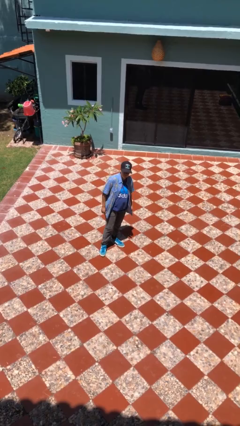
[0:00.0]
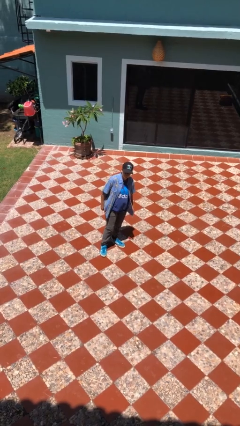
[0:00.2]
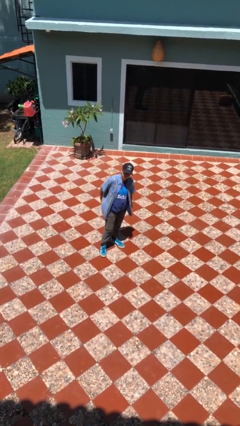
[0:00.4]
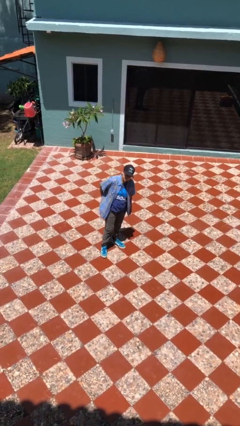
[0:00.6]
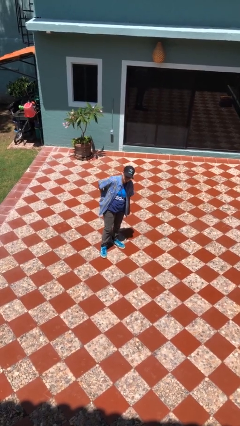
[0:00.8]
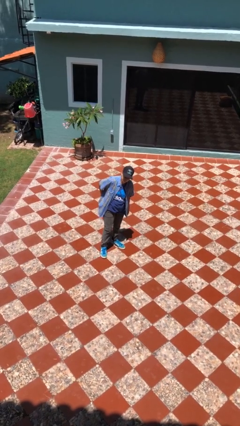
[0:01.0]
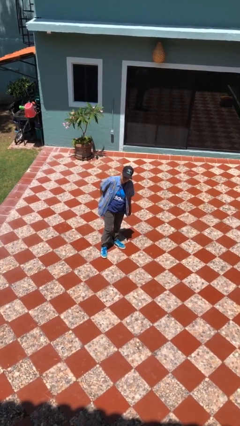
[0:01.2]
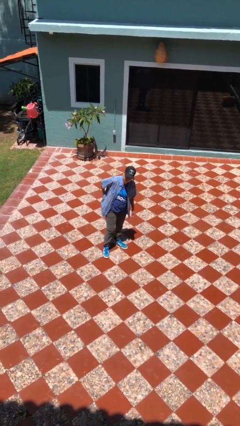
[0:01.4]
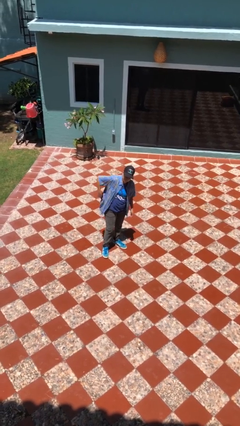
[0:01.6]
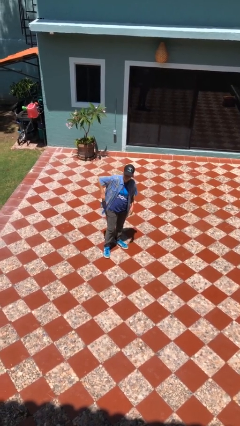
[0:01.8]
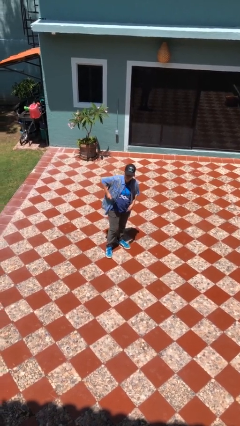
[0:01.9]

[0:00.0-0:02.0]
person takes phone from pocket

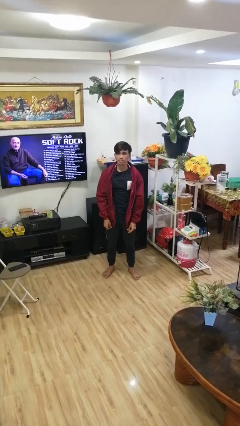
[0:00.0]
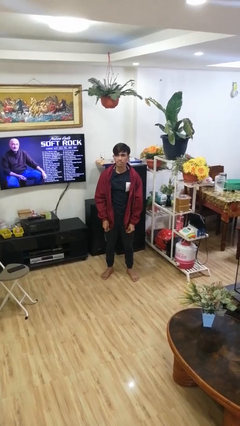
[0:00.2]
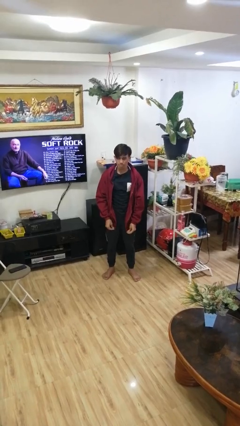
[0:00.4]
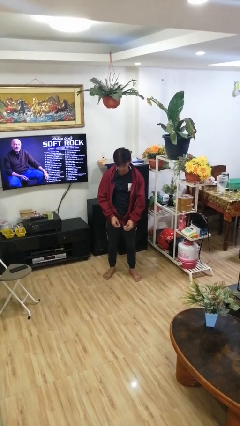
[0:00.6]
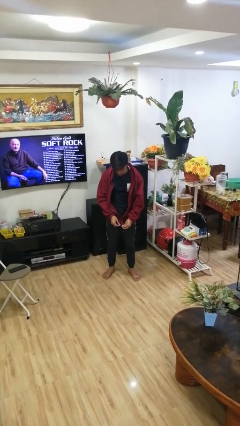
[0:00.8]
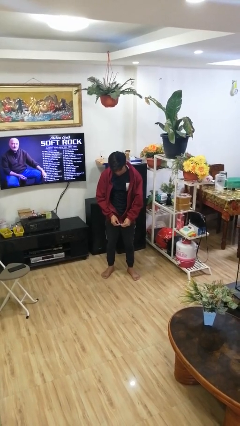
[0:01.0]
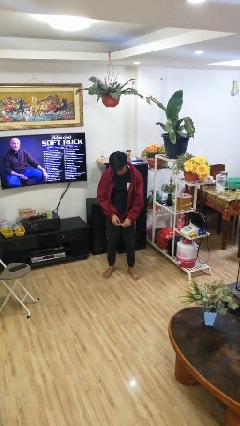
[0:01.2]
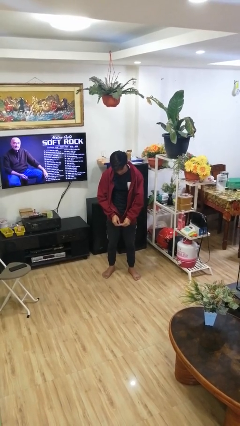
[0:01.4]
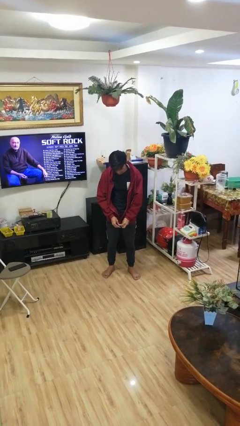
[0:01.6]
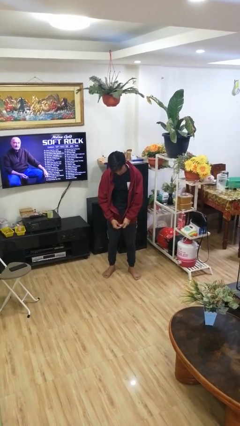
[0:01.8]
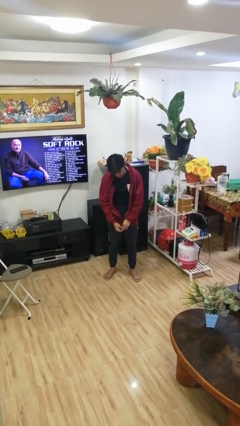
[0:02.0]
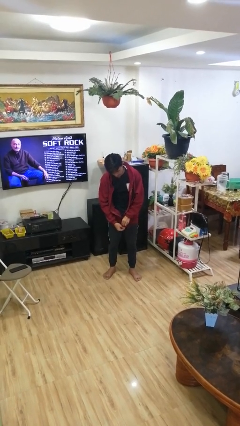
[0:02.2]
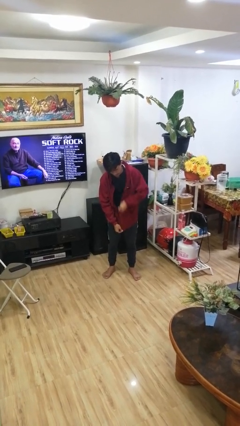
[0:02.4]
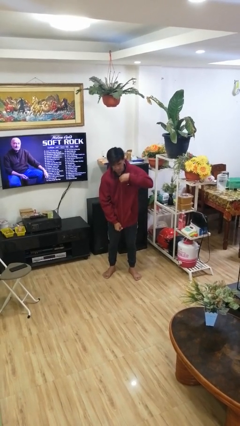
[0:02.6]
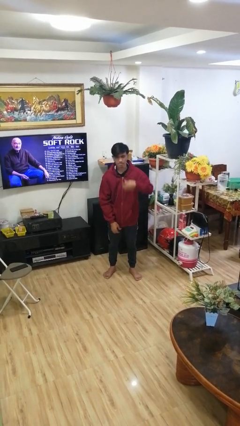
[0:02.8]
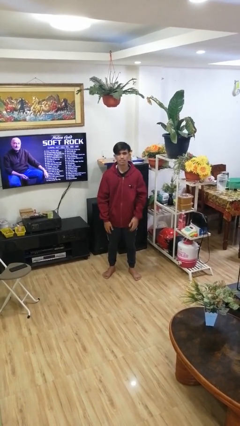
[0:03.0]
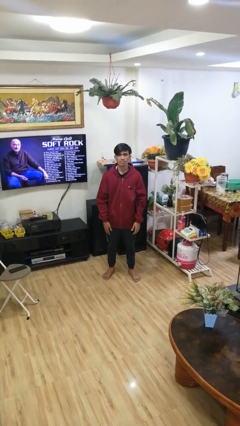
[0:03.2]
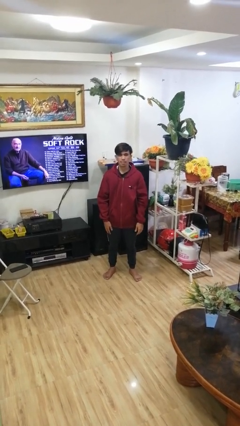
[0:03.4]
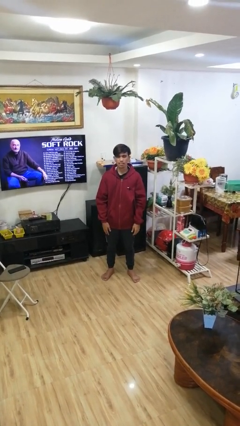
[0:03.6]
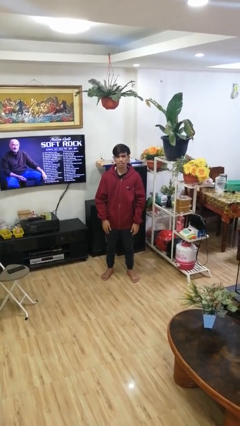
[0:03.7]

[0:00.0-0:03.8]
person zips up jacket

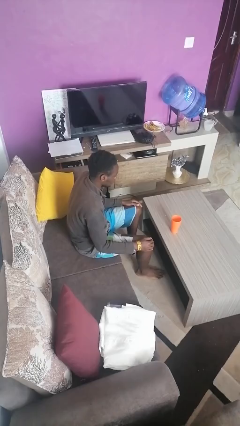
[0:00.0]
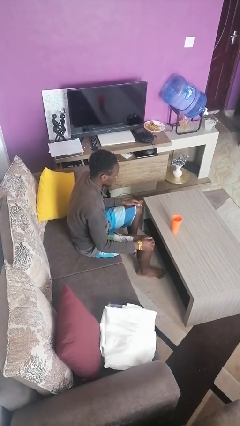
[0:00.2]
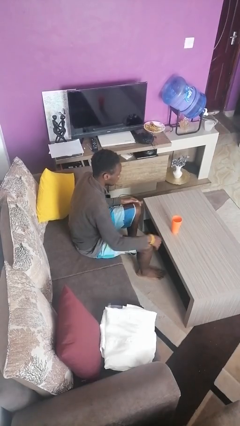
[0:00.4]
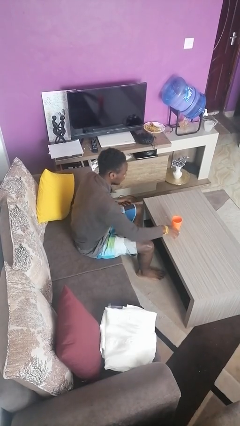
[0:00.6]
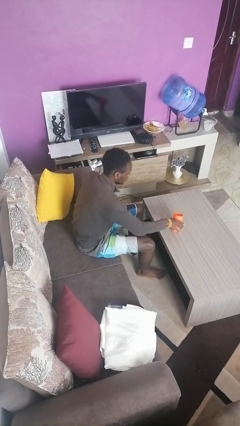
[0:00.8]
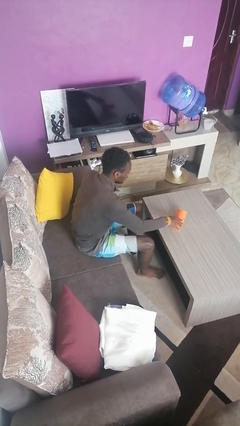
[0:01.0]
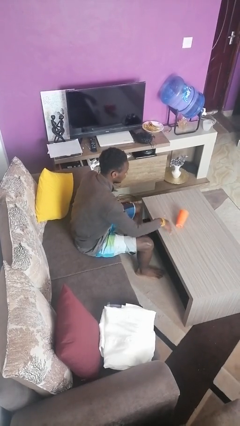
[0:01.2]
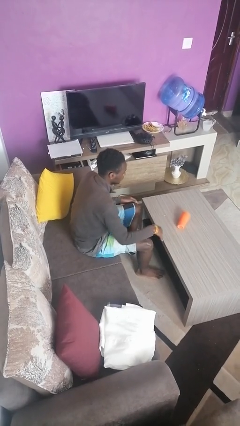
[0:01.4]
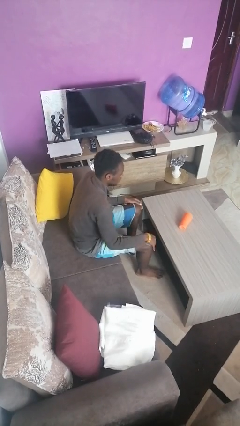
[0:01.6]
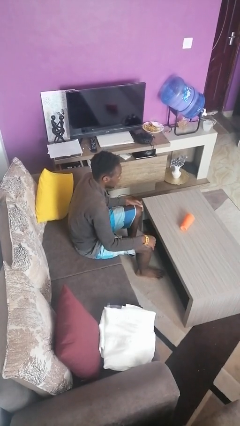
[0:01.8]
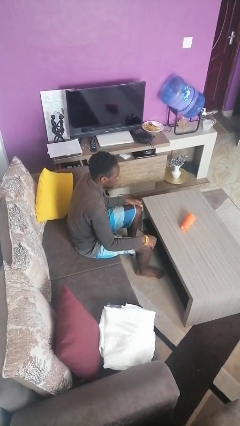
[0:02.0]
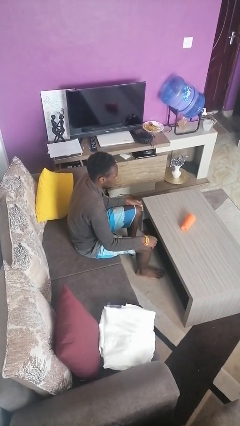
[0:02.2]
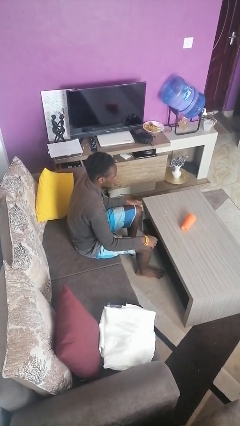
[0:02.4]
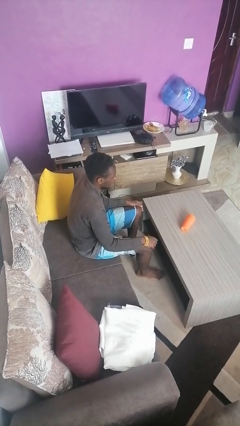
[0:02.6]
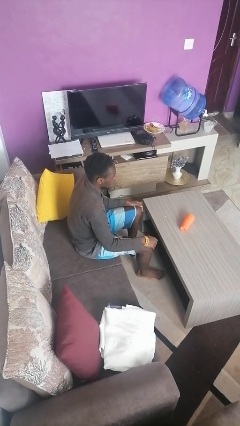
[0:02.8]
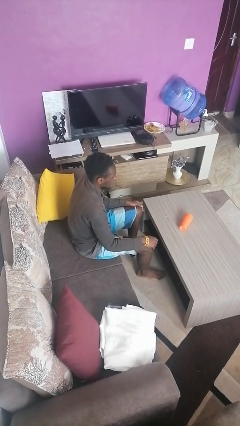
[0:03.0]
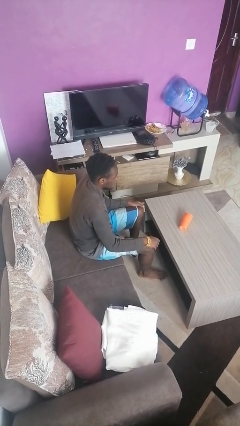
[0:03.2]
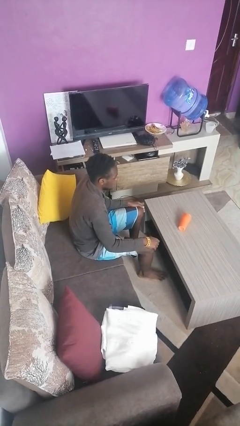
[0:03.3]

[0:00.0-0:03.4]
person knocks over glass

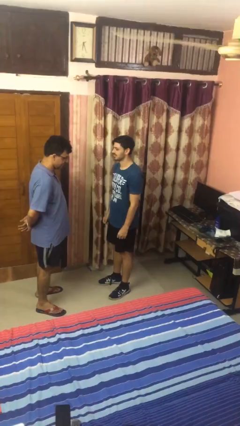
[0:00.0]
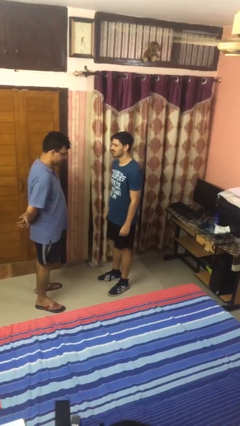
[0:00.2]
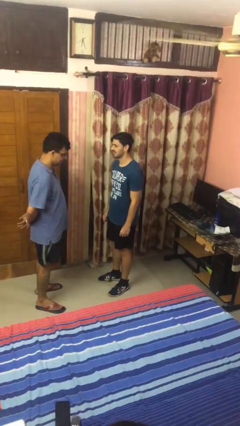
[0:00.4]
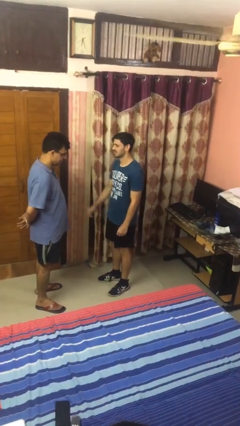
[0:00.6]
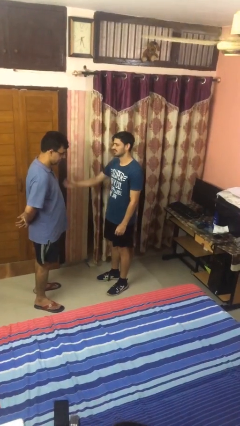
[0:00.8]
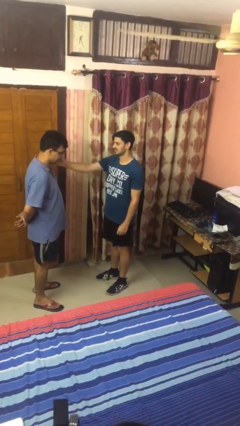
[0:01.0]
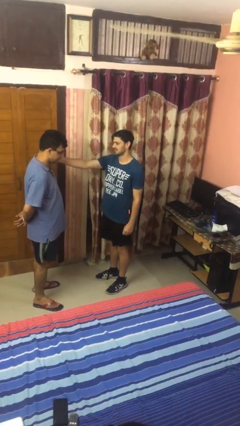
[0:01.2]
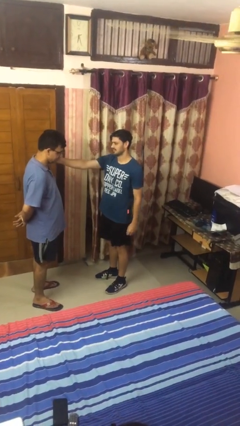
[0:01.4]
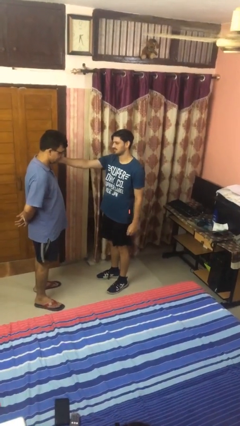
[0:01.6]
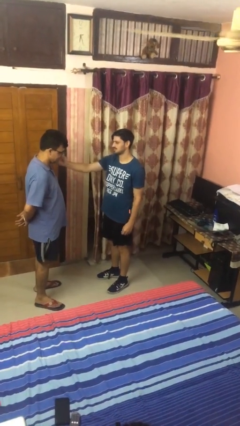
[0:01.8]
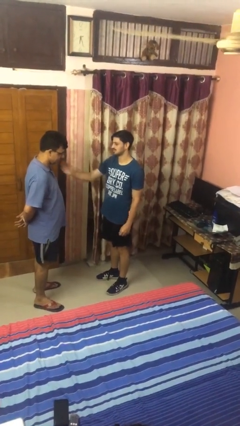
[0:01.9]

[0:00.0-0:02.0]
person touches face of person

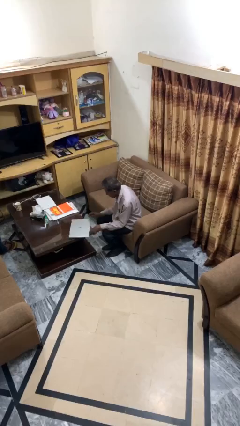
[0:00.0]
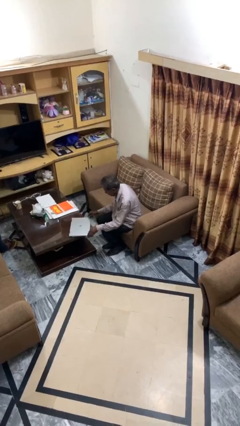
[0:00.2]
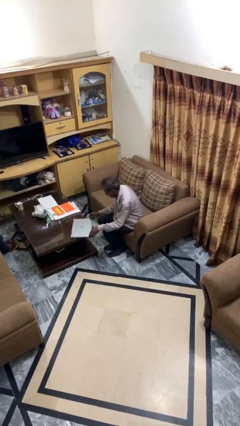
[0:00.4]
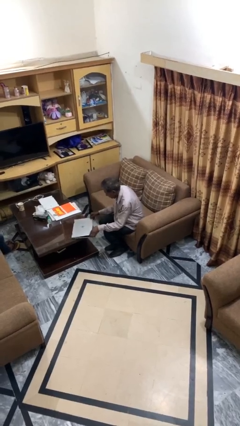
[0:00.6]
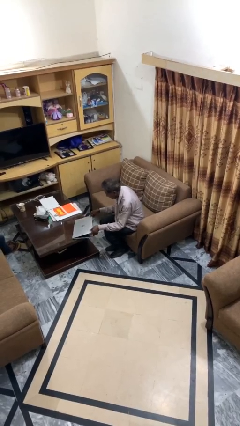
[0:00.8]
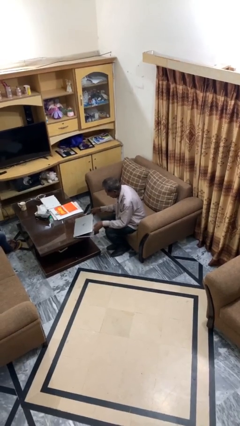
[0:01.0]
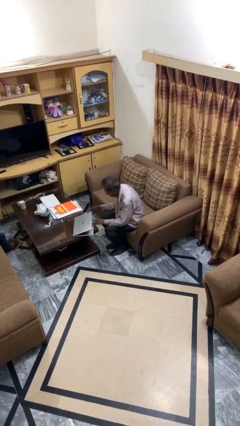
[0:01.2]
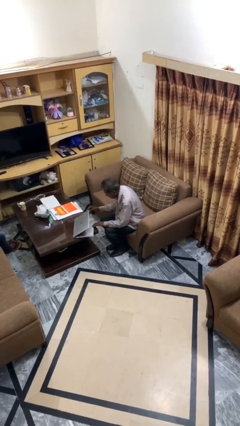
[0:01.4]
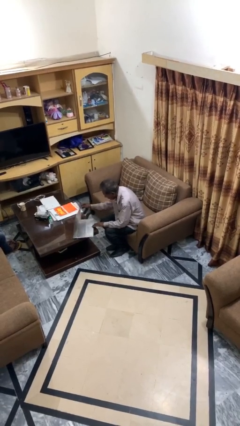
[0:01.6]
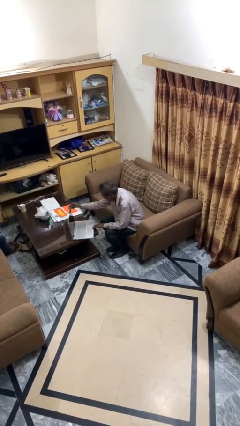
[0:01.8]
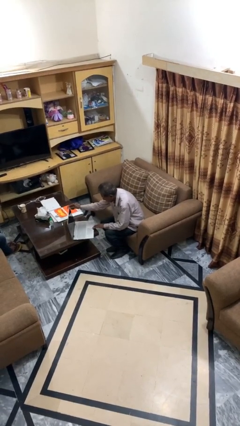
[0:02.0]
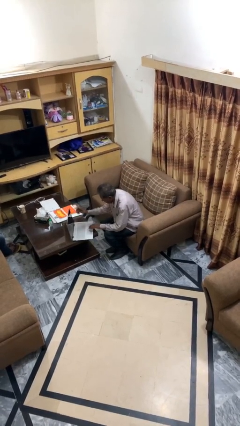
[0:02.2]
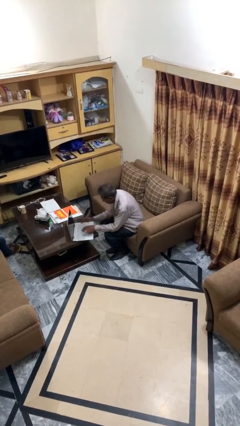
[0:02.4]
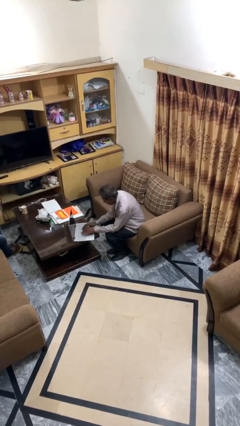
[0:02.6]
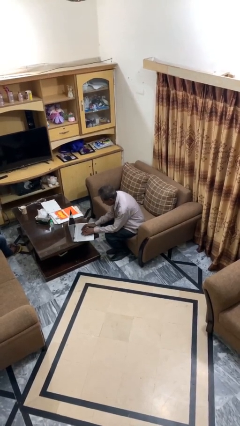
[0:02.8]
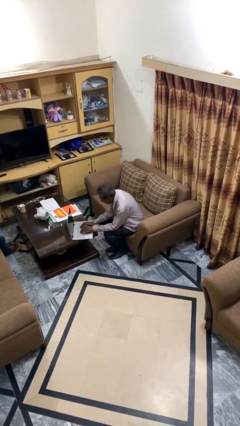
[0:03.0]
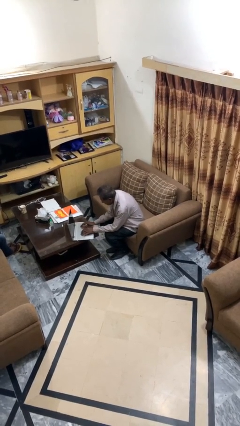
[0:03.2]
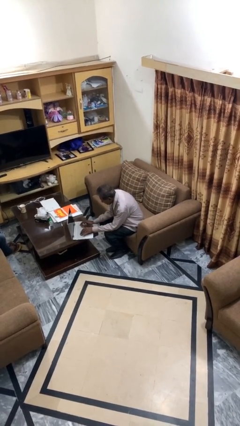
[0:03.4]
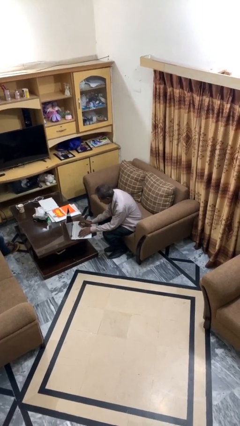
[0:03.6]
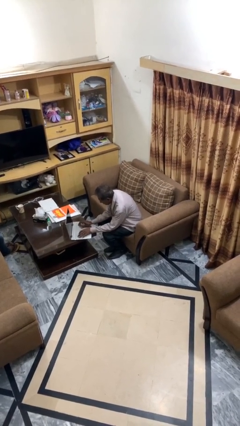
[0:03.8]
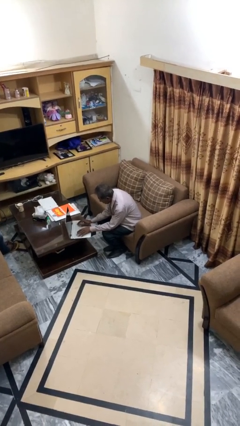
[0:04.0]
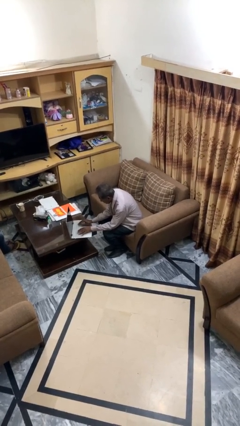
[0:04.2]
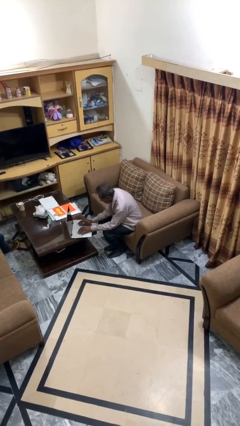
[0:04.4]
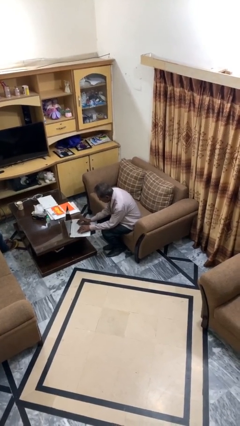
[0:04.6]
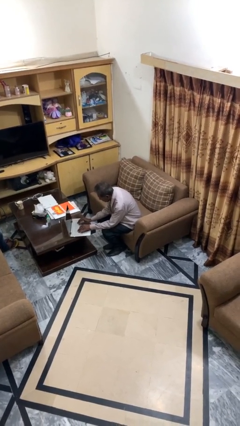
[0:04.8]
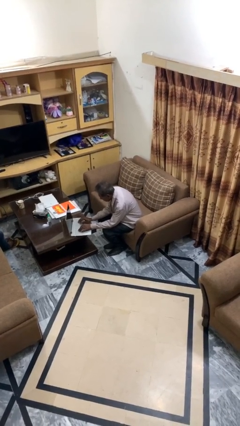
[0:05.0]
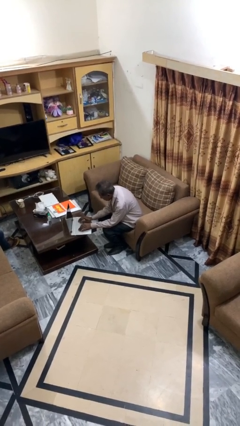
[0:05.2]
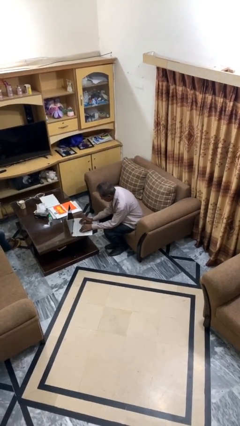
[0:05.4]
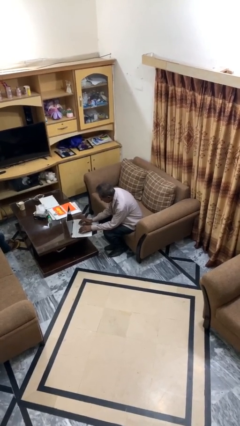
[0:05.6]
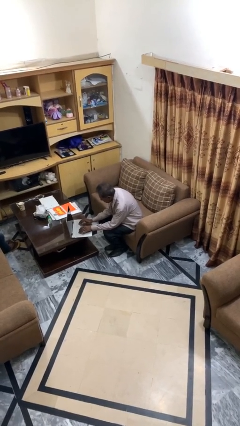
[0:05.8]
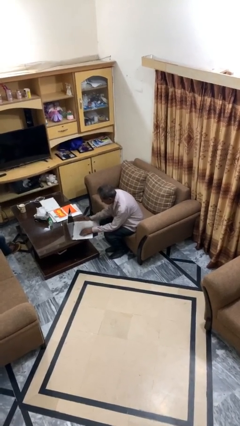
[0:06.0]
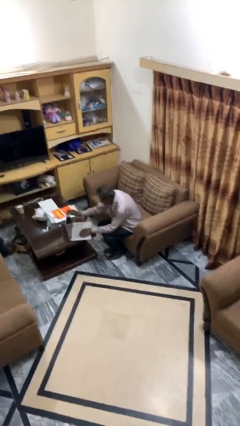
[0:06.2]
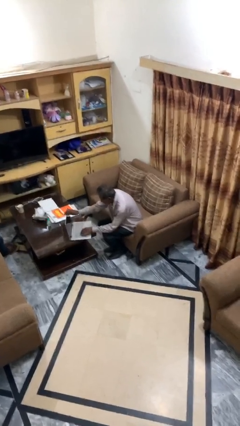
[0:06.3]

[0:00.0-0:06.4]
person interacts with laptop
